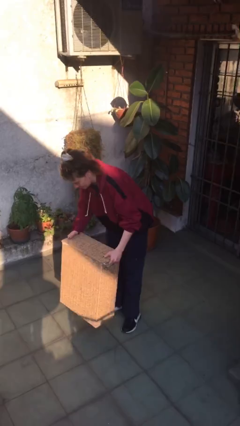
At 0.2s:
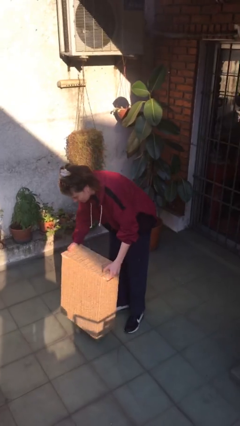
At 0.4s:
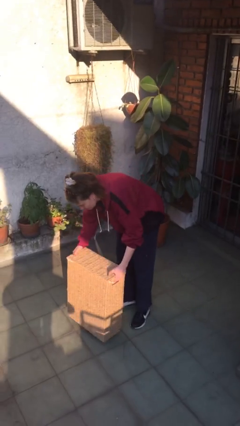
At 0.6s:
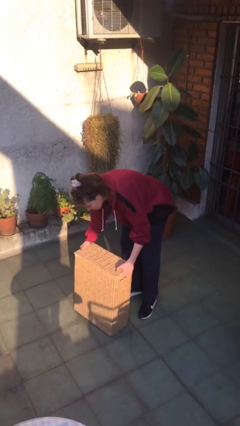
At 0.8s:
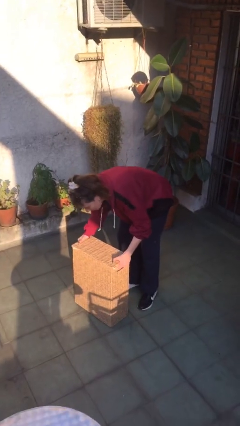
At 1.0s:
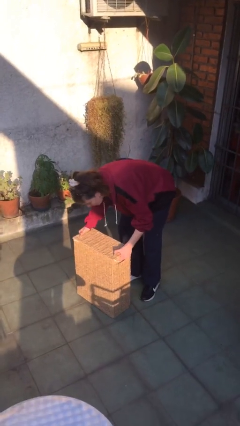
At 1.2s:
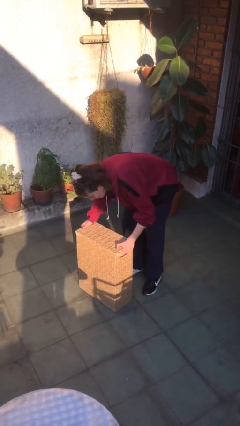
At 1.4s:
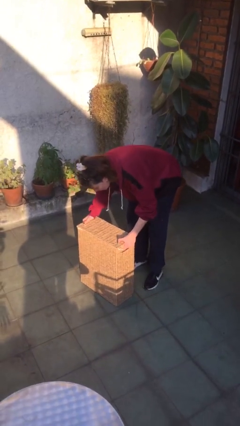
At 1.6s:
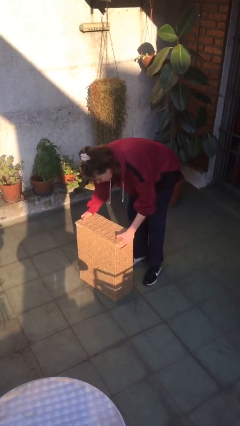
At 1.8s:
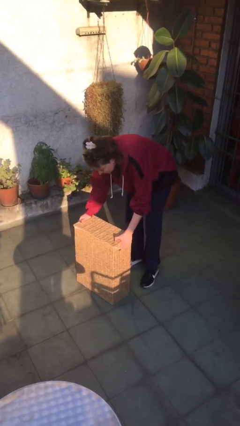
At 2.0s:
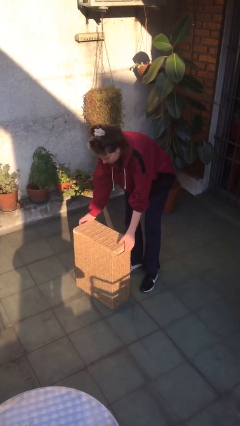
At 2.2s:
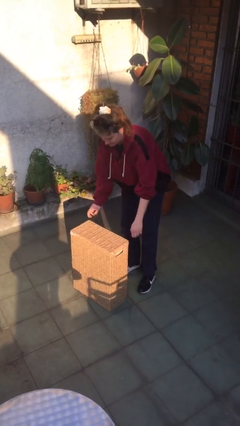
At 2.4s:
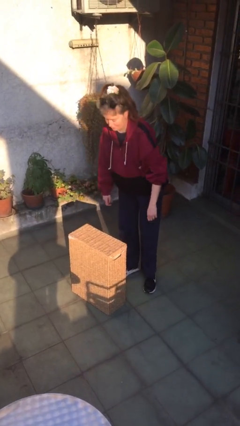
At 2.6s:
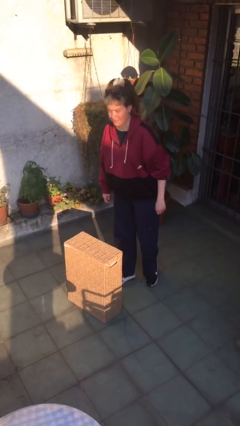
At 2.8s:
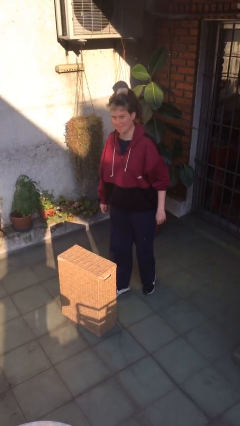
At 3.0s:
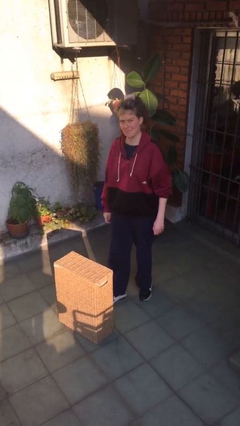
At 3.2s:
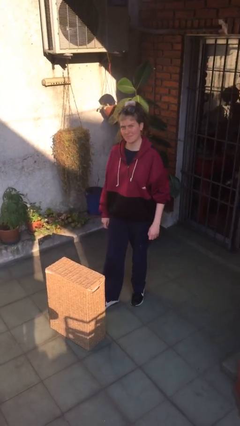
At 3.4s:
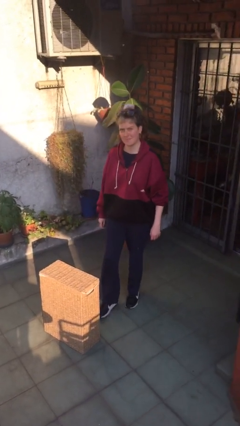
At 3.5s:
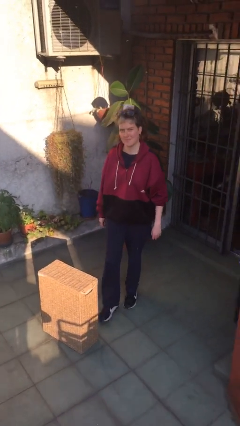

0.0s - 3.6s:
person puts down object on floor

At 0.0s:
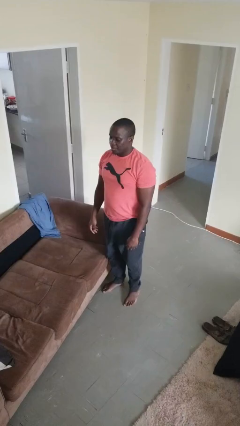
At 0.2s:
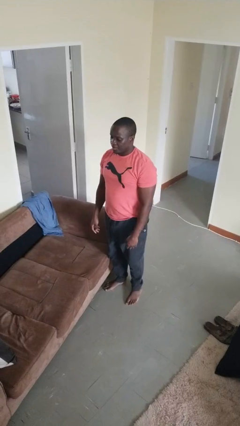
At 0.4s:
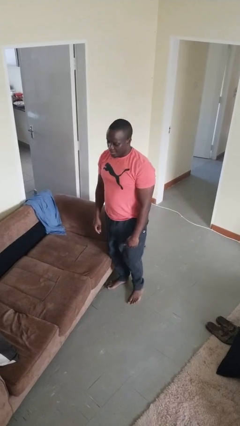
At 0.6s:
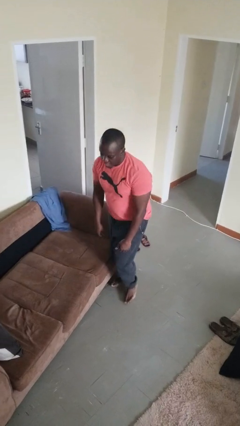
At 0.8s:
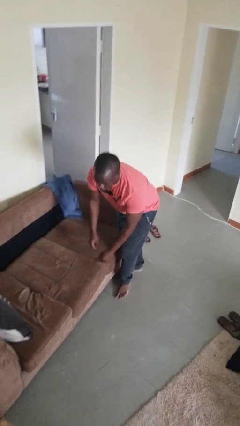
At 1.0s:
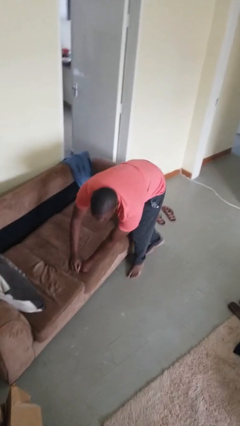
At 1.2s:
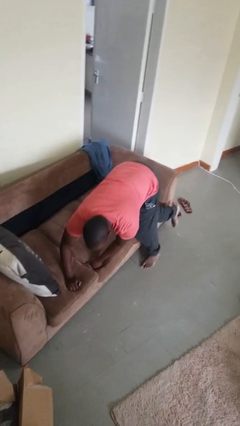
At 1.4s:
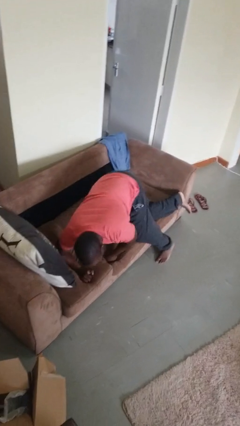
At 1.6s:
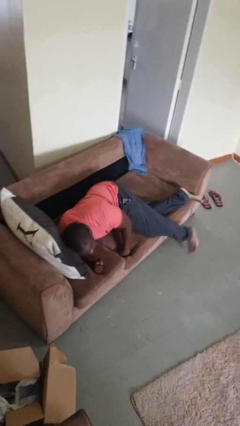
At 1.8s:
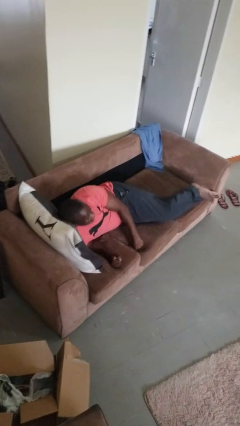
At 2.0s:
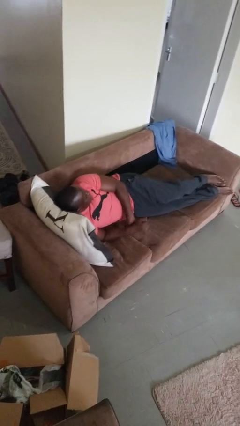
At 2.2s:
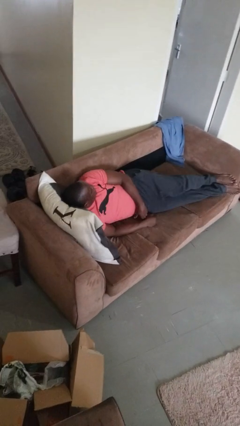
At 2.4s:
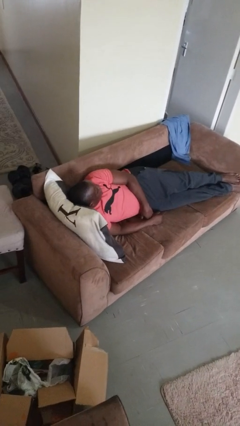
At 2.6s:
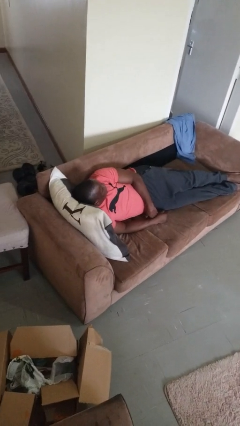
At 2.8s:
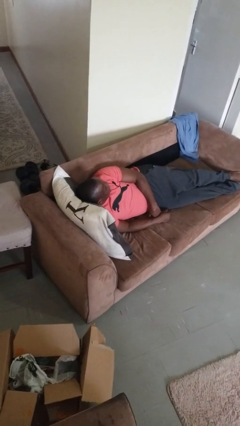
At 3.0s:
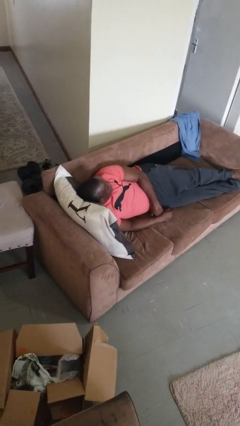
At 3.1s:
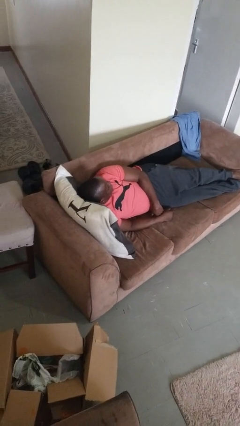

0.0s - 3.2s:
person lies down on couch

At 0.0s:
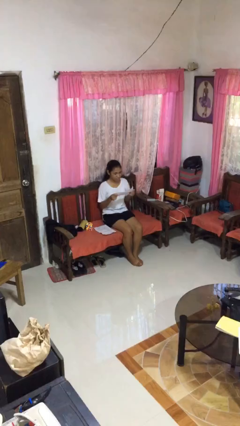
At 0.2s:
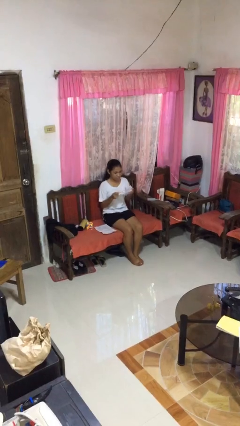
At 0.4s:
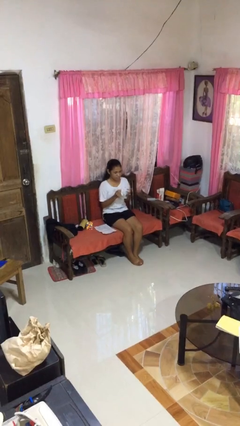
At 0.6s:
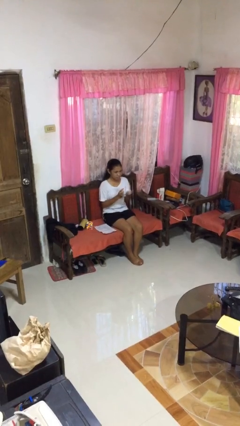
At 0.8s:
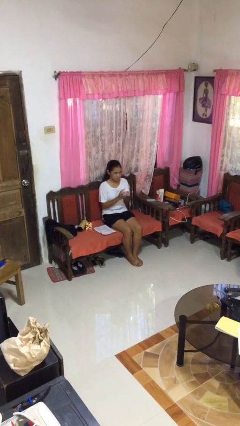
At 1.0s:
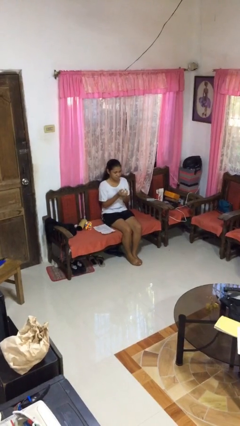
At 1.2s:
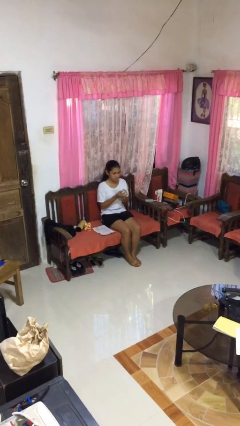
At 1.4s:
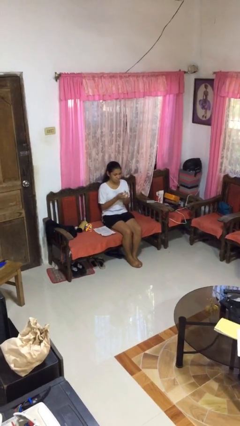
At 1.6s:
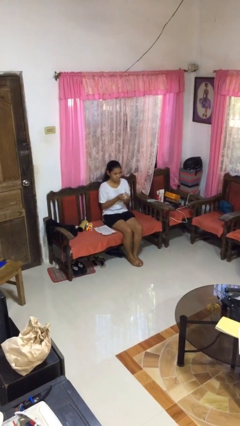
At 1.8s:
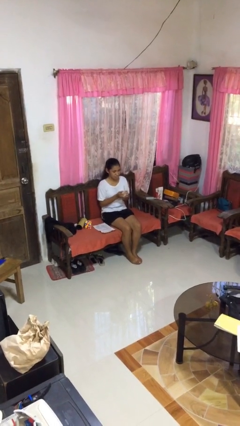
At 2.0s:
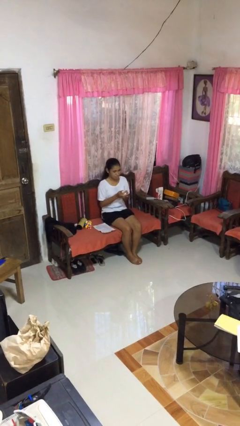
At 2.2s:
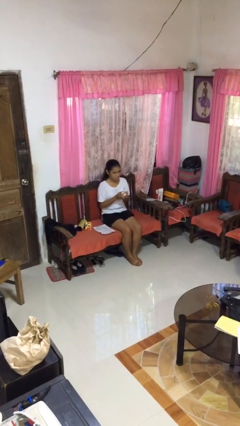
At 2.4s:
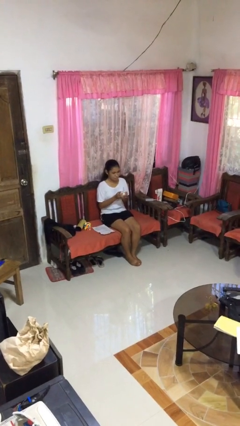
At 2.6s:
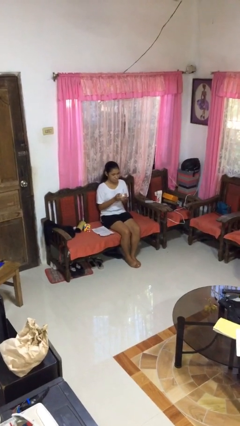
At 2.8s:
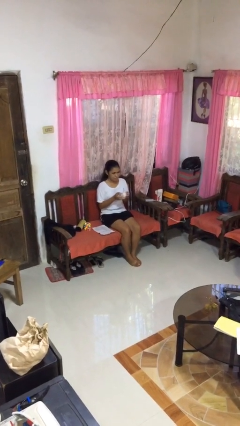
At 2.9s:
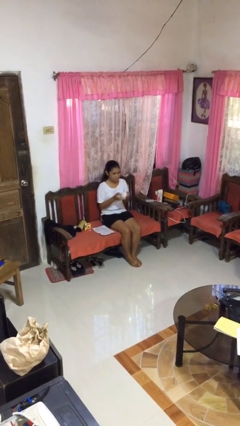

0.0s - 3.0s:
person crumples paper

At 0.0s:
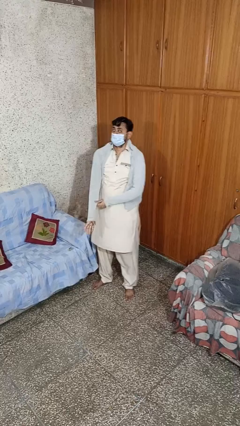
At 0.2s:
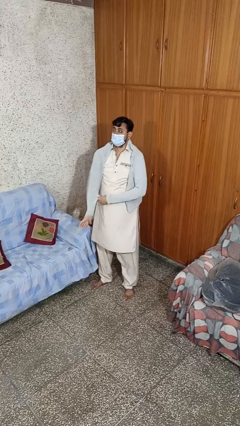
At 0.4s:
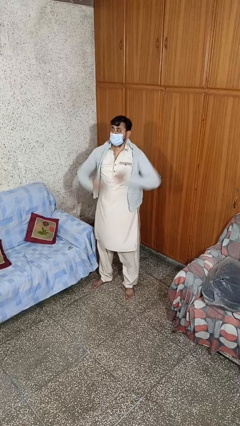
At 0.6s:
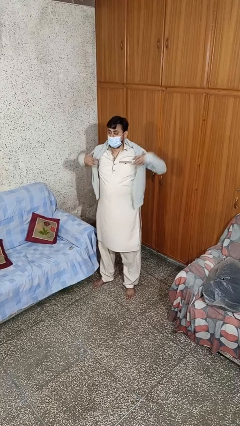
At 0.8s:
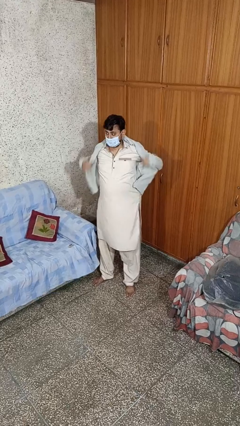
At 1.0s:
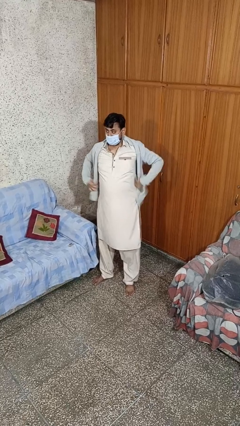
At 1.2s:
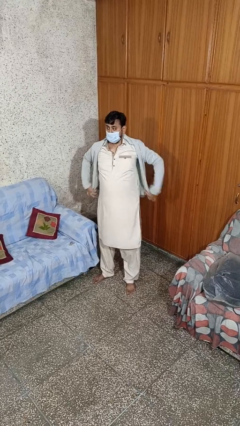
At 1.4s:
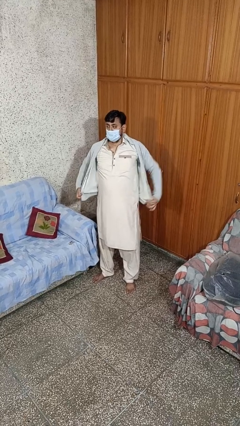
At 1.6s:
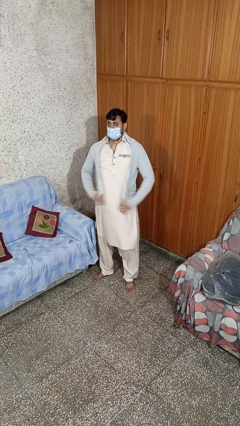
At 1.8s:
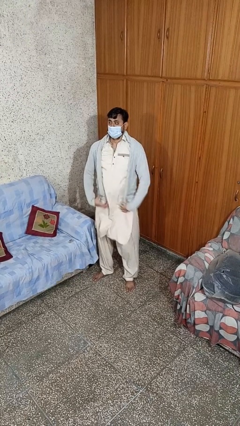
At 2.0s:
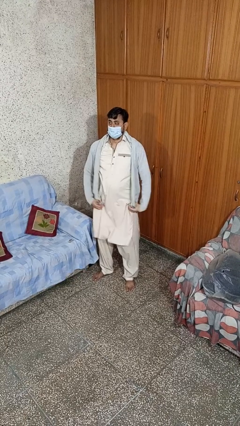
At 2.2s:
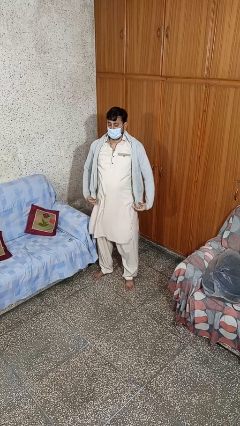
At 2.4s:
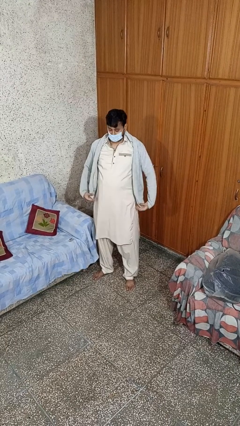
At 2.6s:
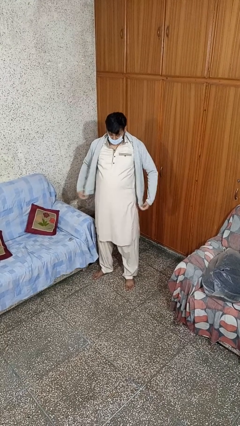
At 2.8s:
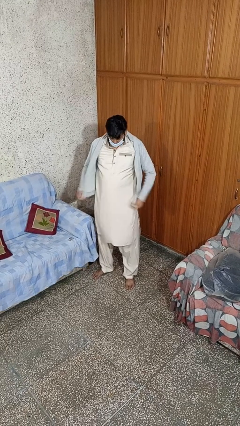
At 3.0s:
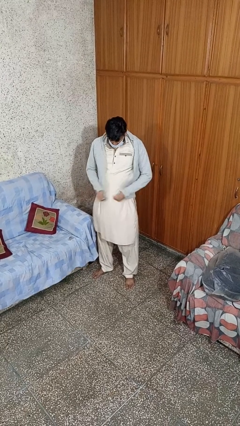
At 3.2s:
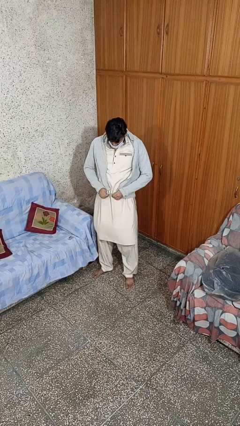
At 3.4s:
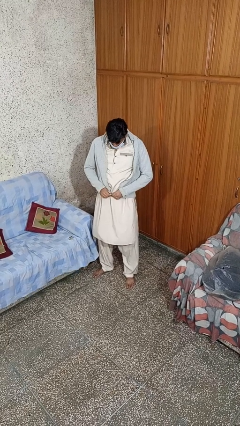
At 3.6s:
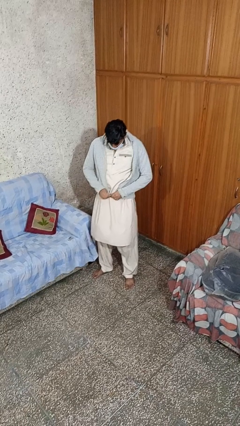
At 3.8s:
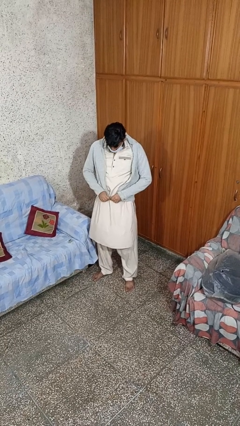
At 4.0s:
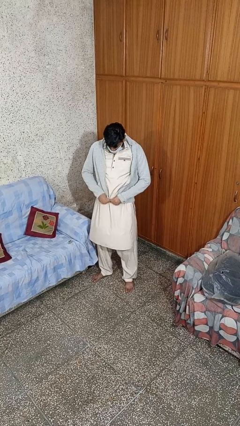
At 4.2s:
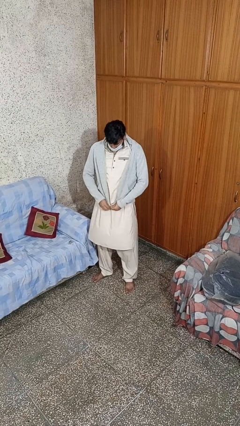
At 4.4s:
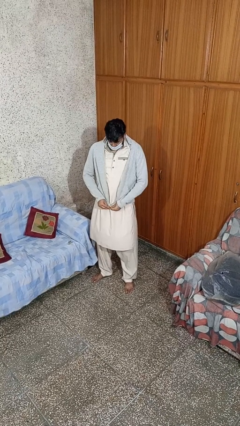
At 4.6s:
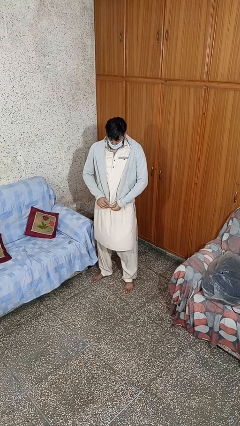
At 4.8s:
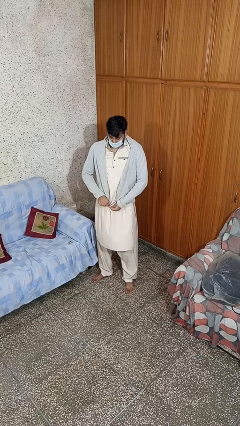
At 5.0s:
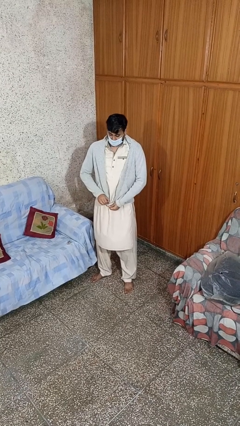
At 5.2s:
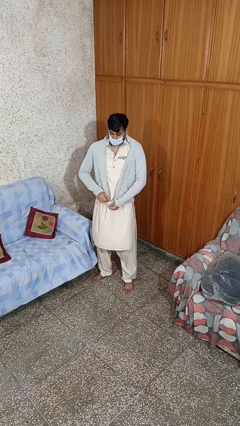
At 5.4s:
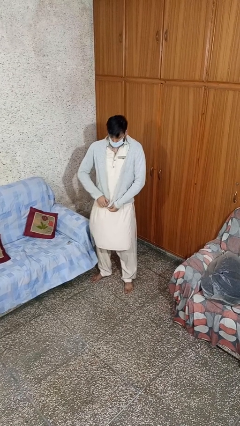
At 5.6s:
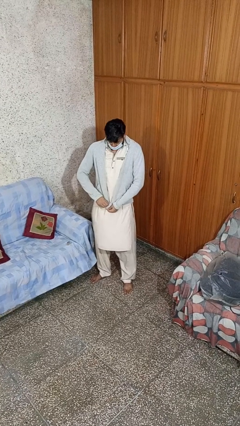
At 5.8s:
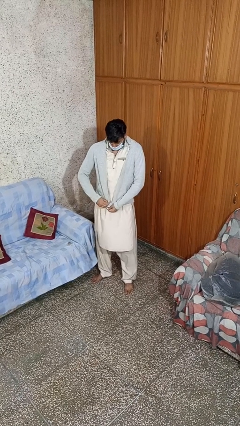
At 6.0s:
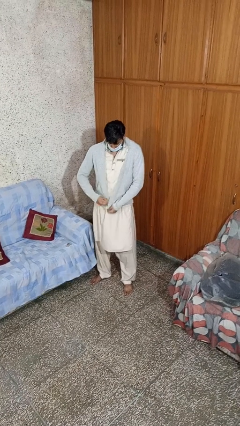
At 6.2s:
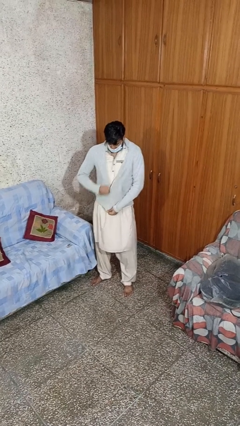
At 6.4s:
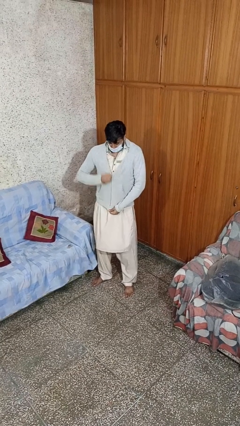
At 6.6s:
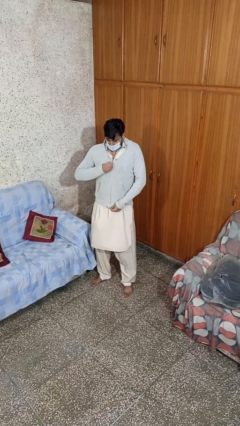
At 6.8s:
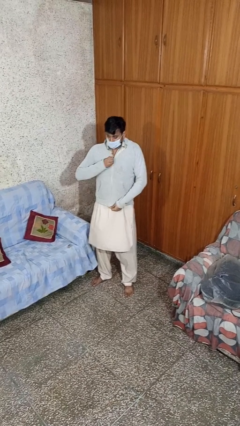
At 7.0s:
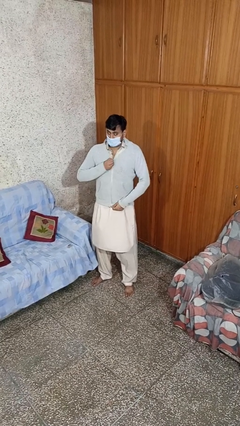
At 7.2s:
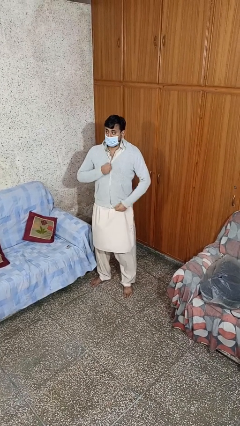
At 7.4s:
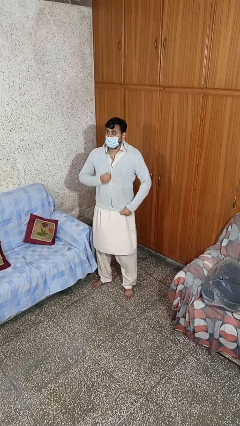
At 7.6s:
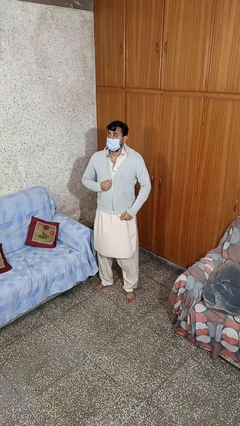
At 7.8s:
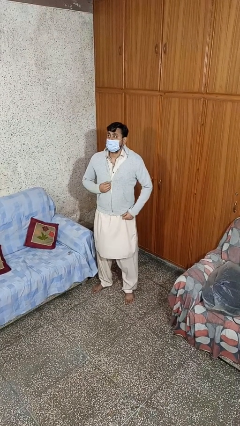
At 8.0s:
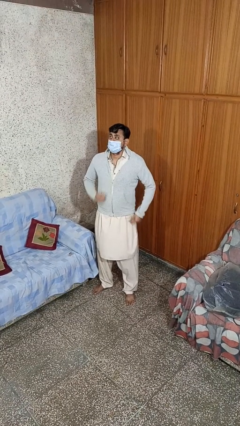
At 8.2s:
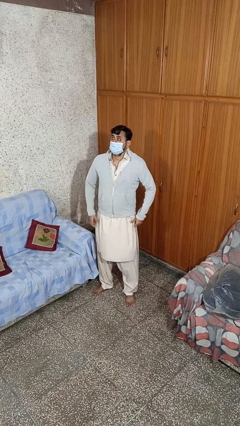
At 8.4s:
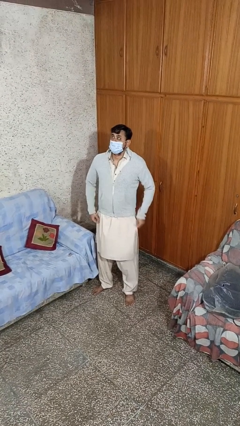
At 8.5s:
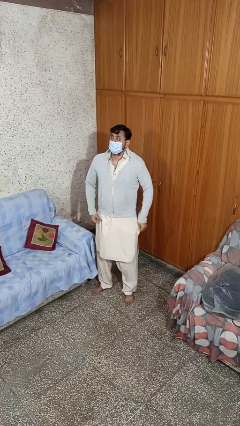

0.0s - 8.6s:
person zips up jacket
